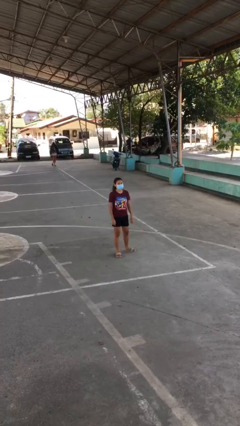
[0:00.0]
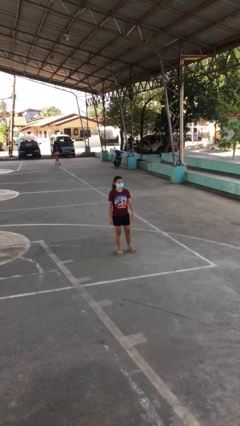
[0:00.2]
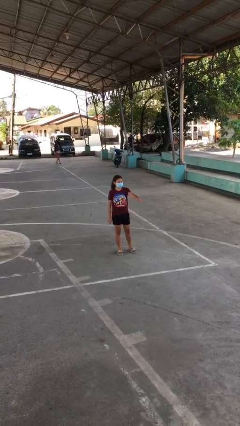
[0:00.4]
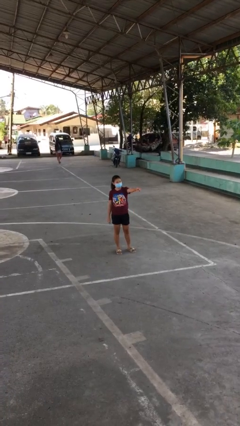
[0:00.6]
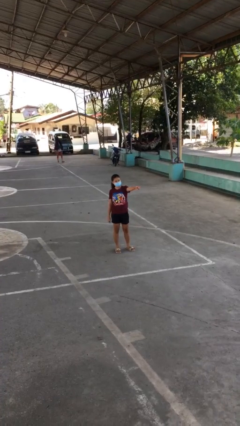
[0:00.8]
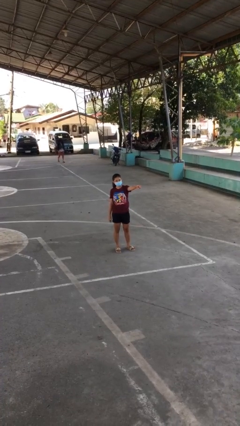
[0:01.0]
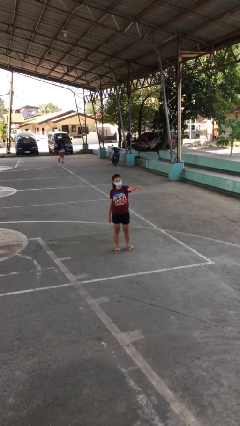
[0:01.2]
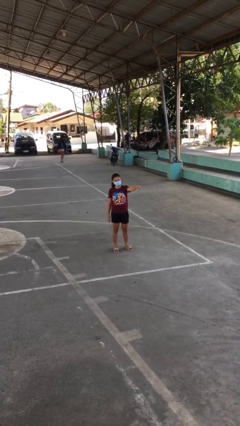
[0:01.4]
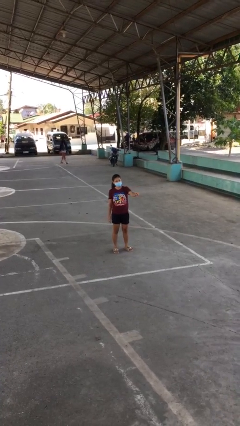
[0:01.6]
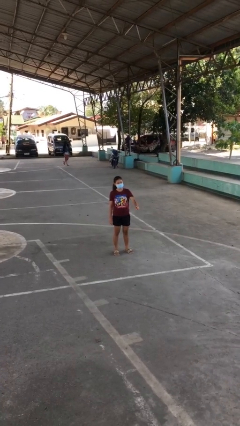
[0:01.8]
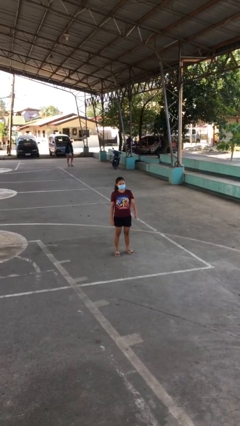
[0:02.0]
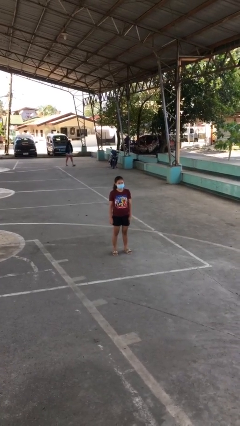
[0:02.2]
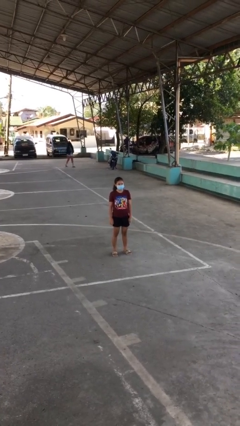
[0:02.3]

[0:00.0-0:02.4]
person points at person

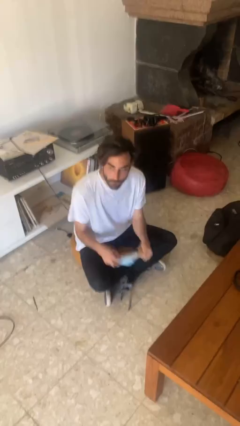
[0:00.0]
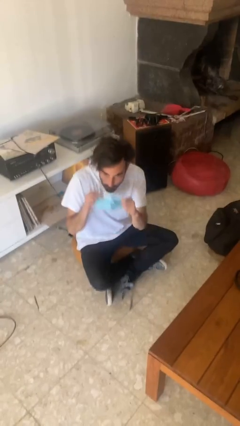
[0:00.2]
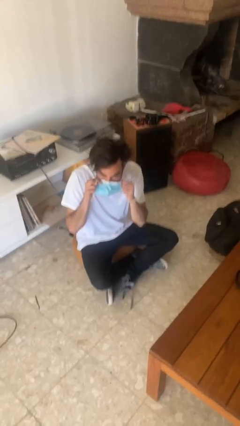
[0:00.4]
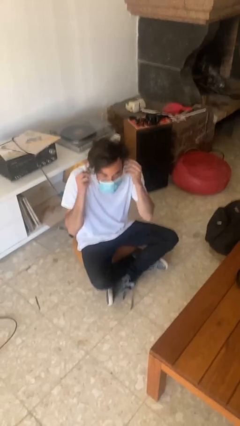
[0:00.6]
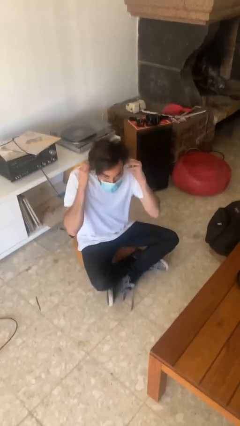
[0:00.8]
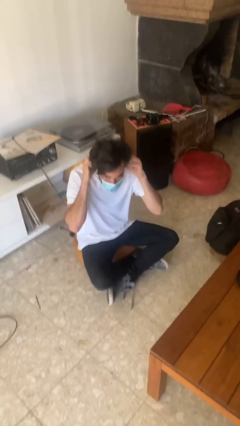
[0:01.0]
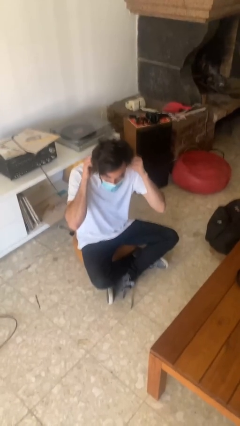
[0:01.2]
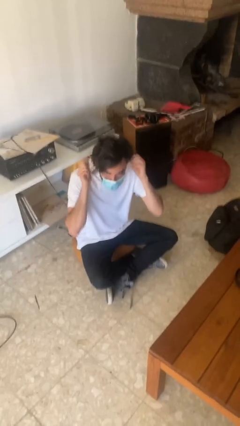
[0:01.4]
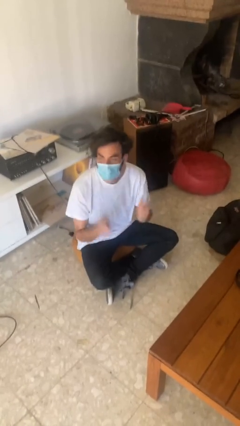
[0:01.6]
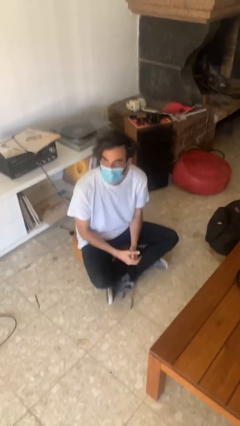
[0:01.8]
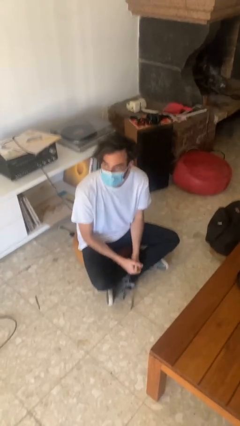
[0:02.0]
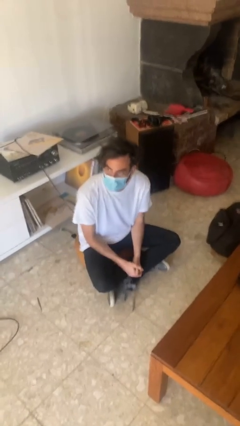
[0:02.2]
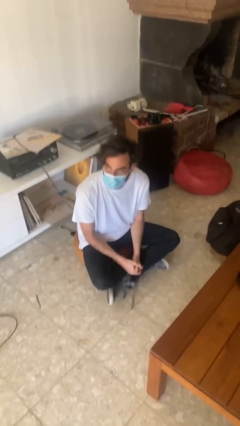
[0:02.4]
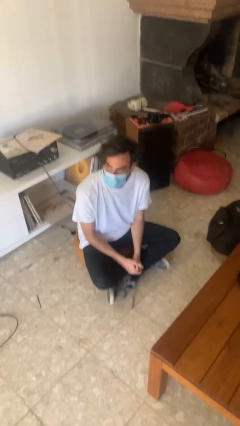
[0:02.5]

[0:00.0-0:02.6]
person puts on facemask

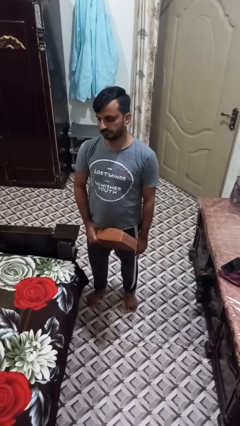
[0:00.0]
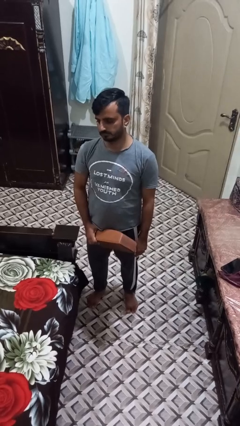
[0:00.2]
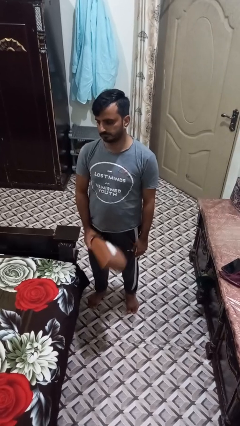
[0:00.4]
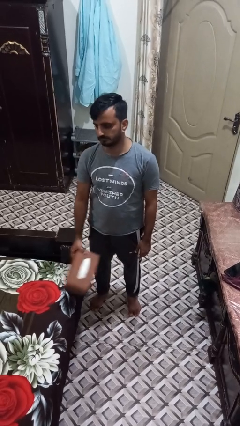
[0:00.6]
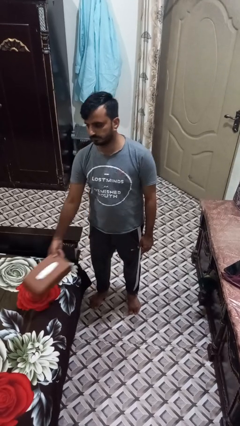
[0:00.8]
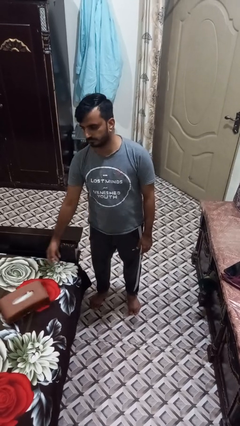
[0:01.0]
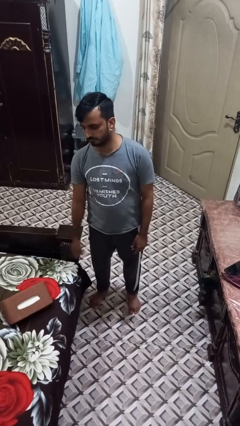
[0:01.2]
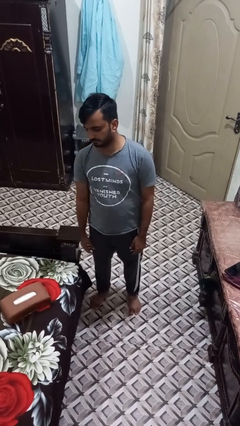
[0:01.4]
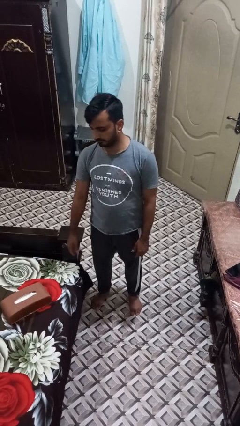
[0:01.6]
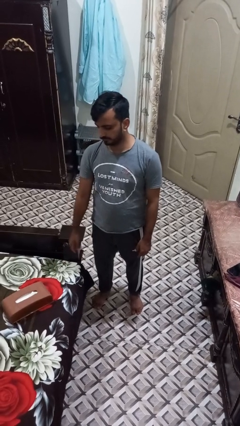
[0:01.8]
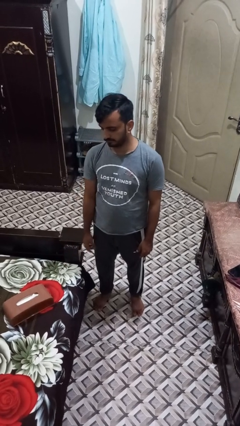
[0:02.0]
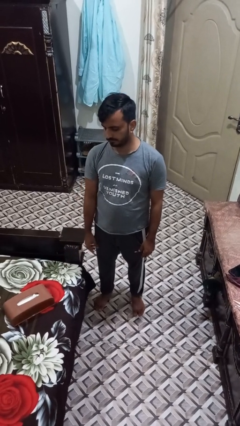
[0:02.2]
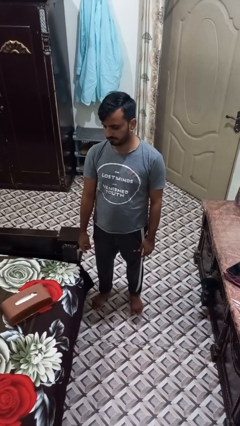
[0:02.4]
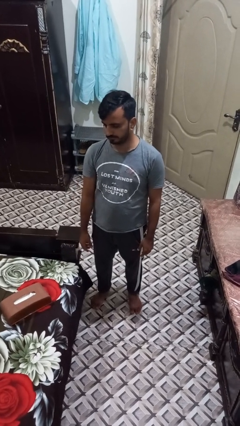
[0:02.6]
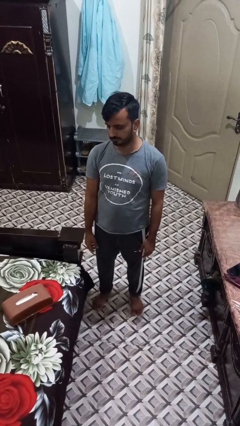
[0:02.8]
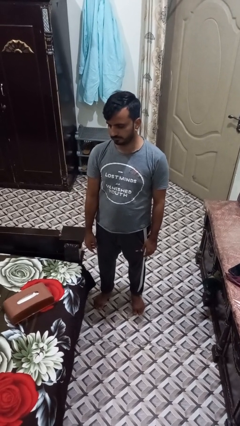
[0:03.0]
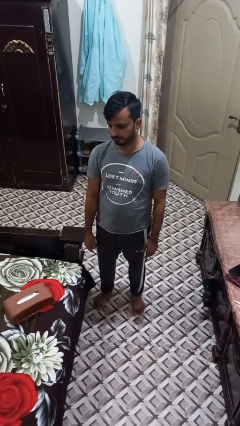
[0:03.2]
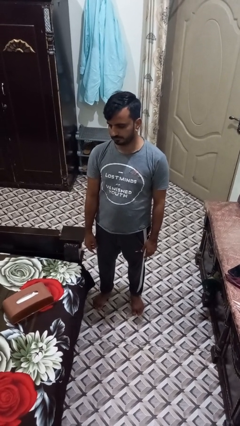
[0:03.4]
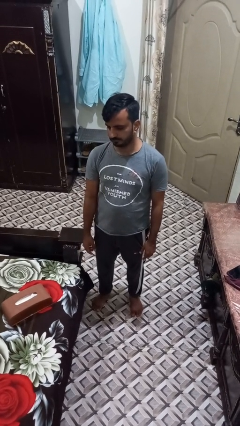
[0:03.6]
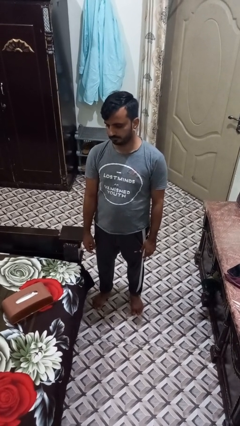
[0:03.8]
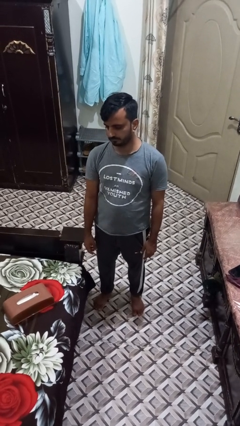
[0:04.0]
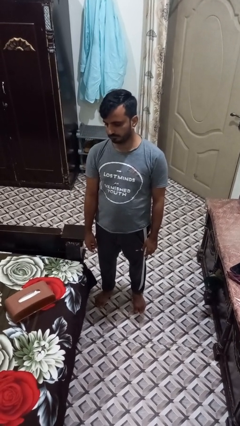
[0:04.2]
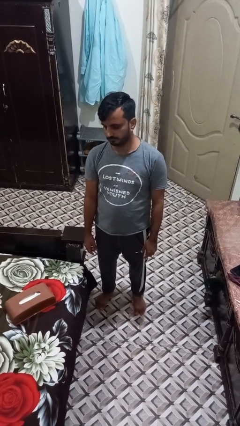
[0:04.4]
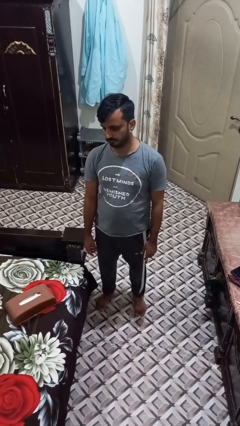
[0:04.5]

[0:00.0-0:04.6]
person puts down object on bed

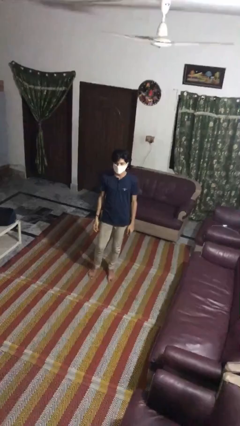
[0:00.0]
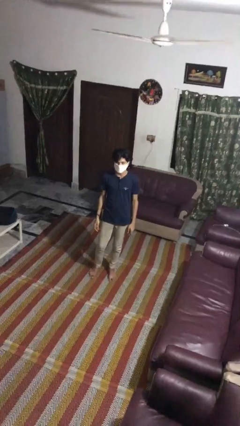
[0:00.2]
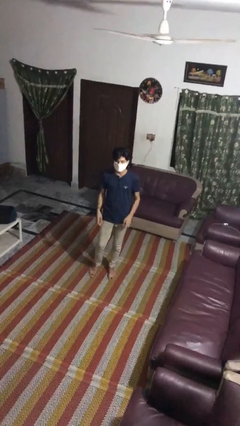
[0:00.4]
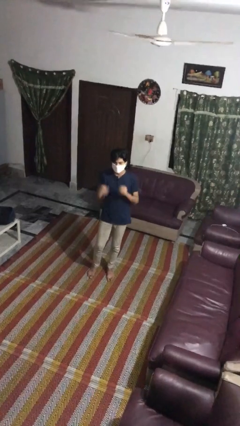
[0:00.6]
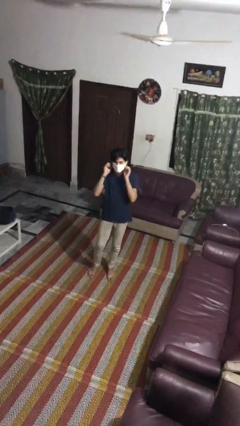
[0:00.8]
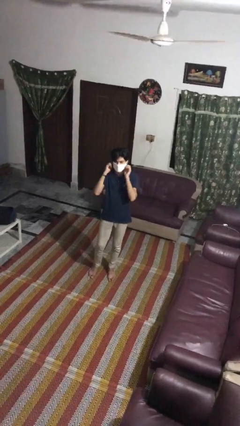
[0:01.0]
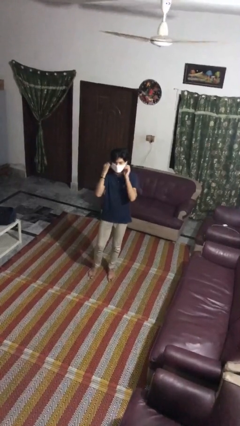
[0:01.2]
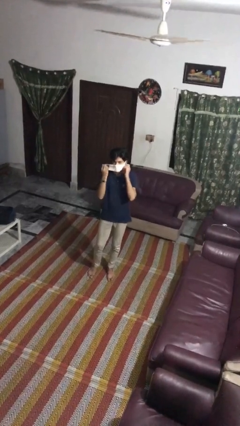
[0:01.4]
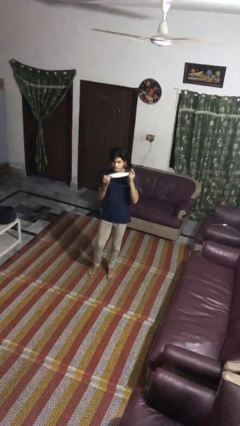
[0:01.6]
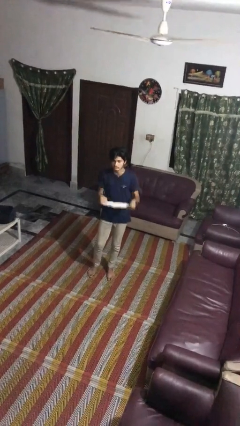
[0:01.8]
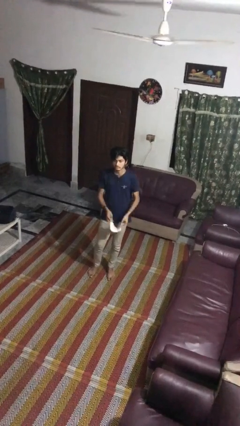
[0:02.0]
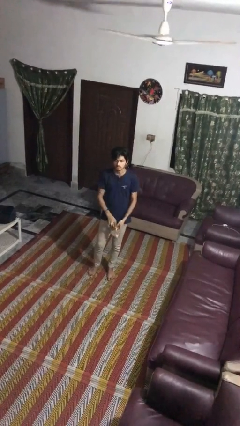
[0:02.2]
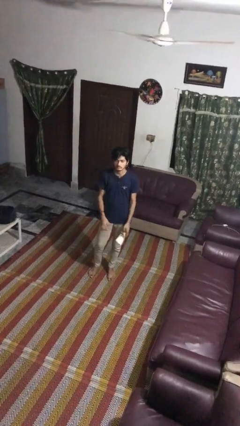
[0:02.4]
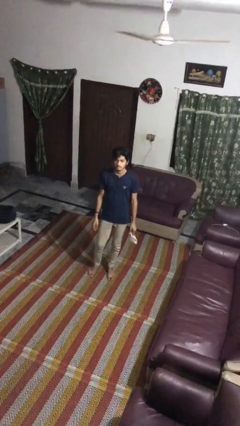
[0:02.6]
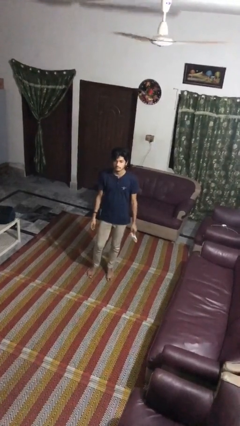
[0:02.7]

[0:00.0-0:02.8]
person takes off facemask

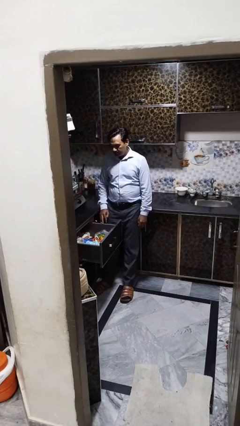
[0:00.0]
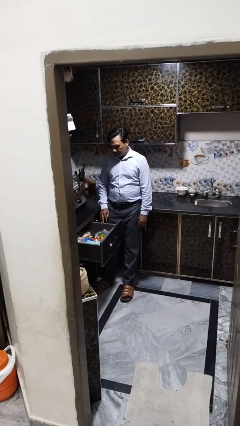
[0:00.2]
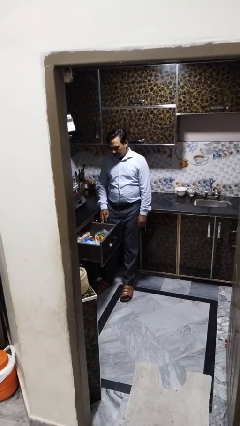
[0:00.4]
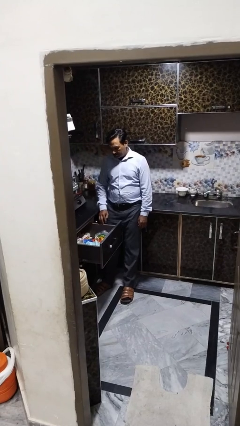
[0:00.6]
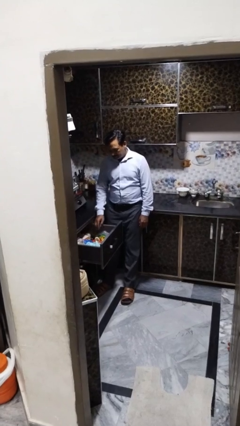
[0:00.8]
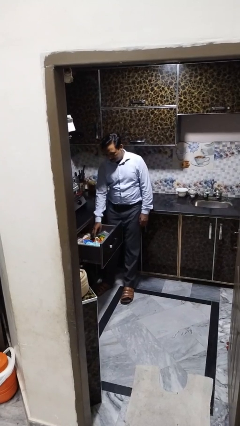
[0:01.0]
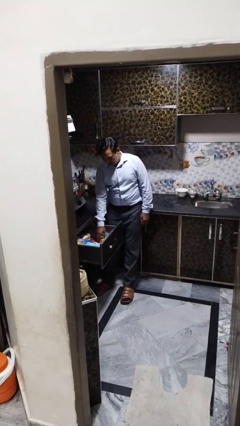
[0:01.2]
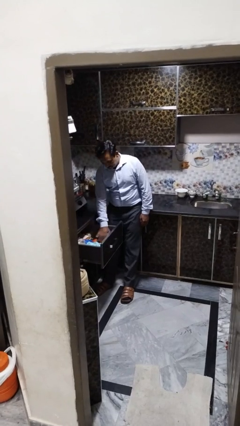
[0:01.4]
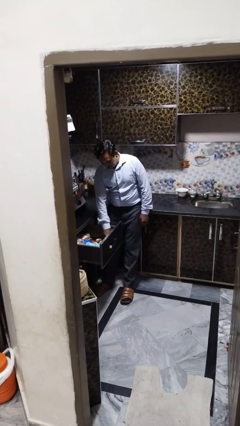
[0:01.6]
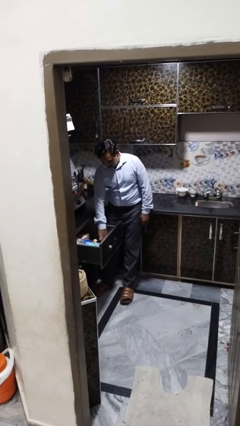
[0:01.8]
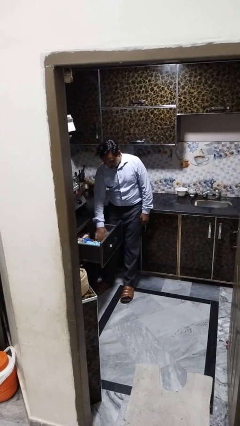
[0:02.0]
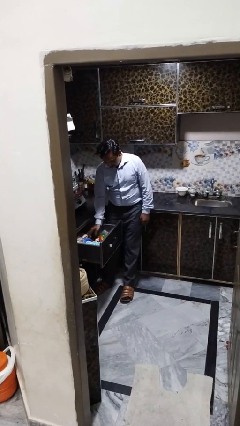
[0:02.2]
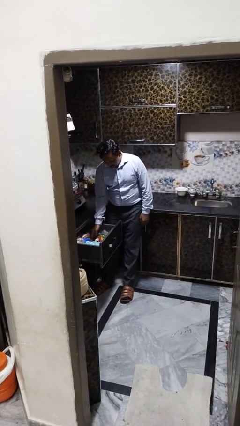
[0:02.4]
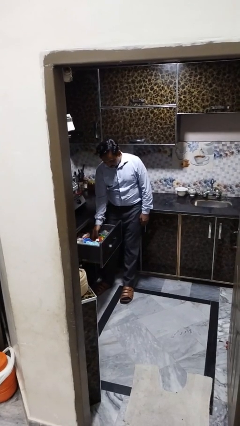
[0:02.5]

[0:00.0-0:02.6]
person searches in kitchen drawer

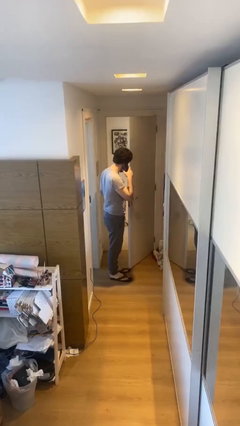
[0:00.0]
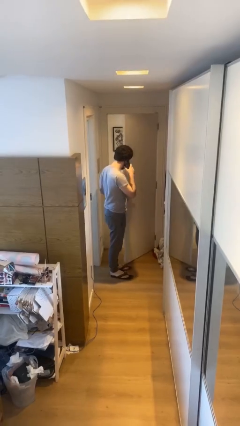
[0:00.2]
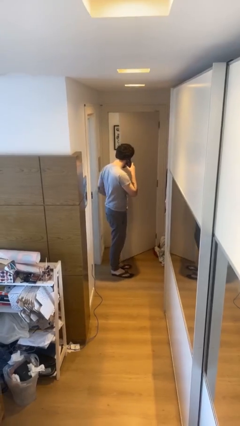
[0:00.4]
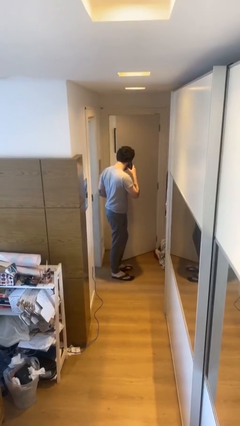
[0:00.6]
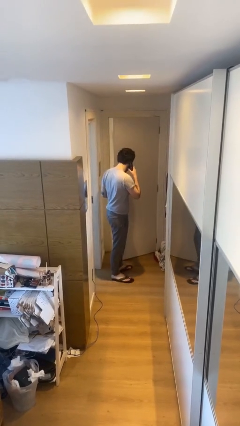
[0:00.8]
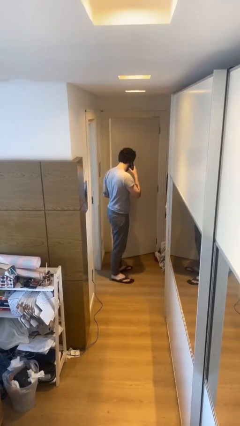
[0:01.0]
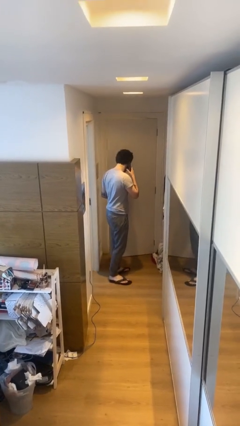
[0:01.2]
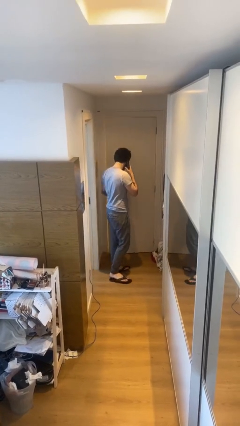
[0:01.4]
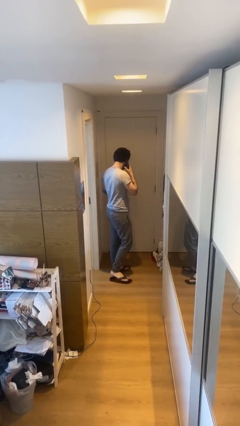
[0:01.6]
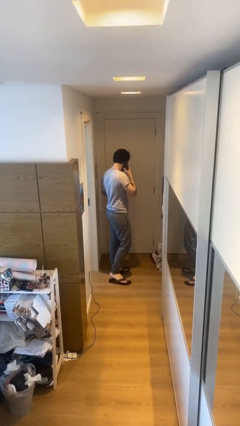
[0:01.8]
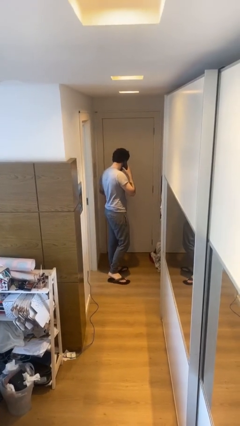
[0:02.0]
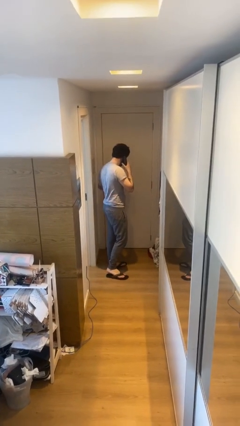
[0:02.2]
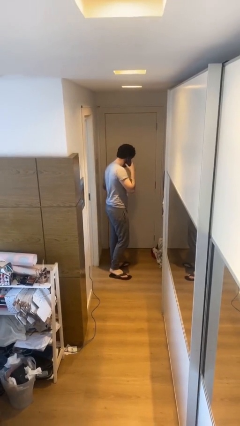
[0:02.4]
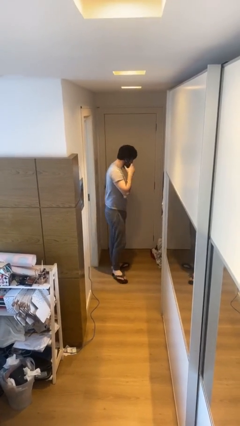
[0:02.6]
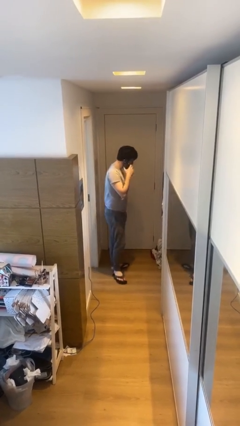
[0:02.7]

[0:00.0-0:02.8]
person closes facility door
